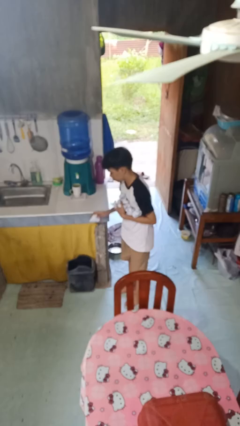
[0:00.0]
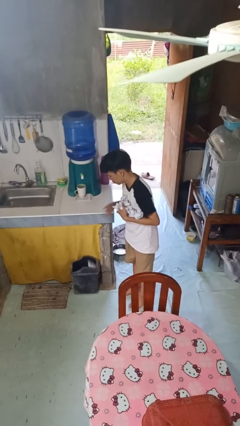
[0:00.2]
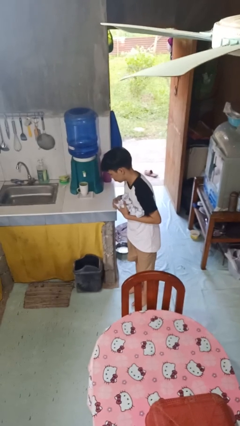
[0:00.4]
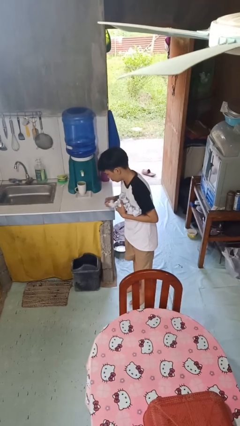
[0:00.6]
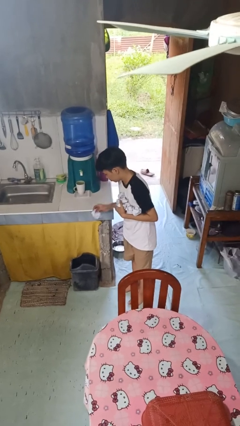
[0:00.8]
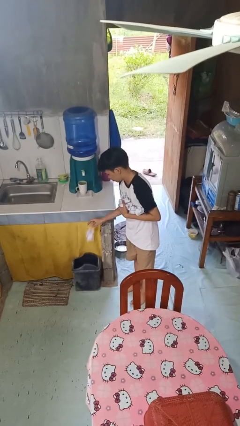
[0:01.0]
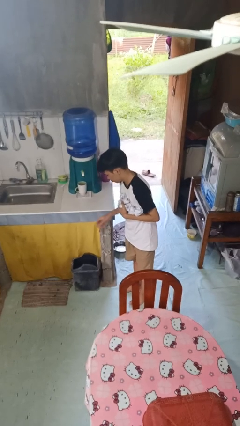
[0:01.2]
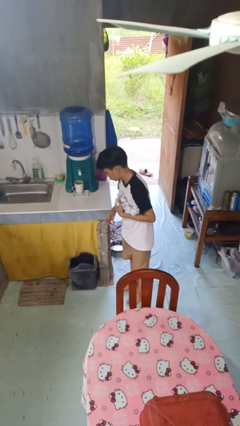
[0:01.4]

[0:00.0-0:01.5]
person discards trash

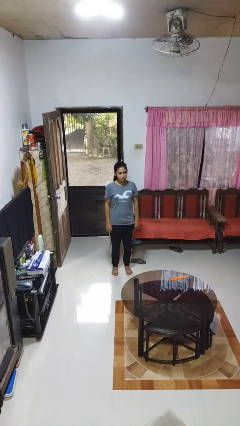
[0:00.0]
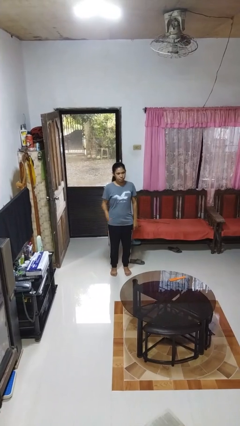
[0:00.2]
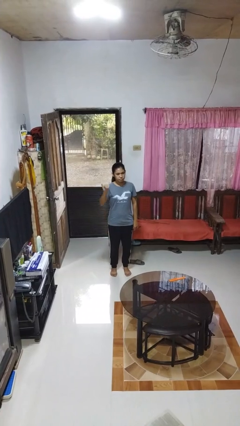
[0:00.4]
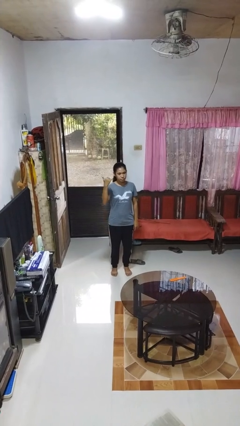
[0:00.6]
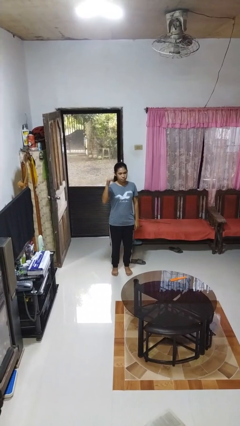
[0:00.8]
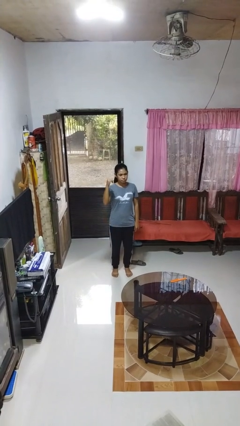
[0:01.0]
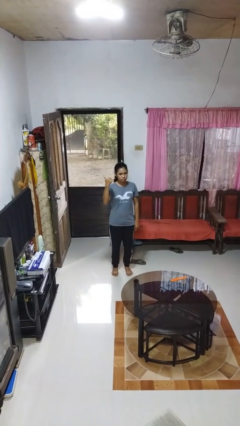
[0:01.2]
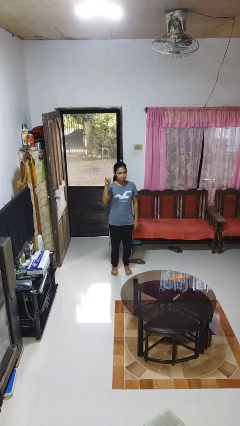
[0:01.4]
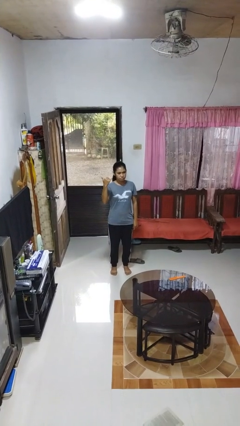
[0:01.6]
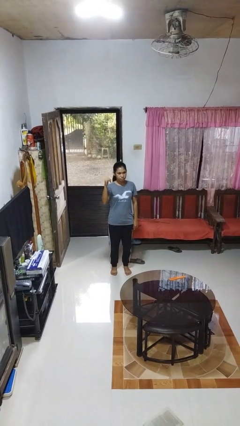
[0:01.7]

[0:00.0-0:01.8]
person gestures hang loose

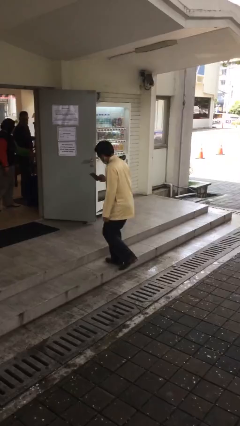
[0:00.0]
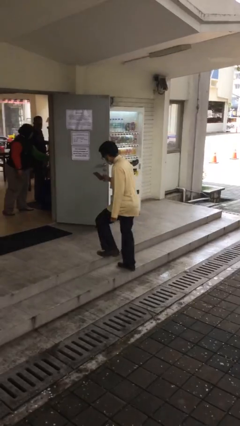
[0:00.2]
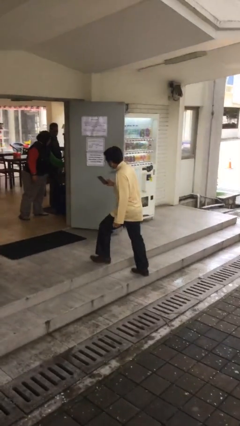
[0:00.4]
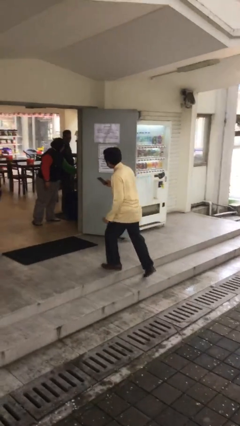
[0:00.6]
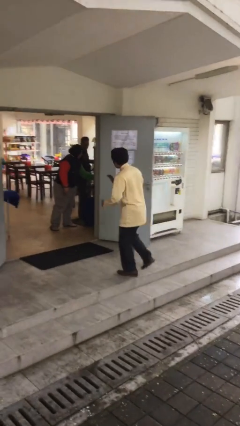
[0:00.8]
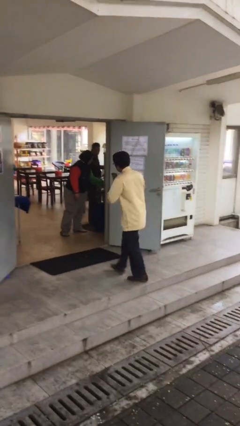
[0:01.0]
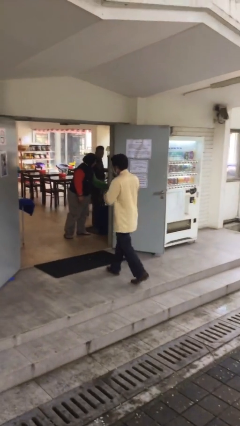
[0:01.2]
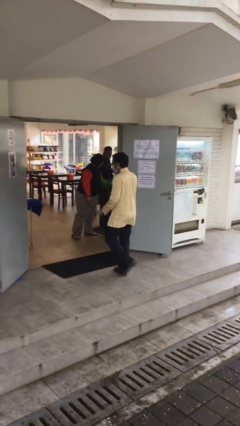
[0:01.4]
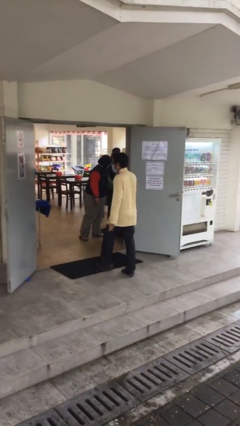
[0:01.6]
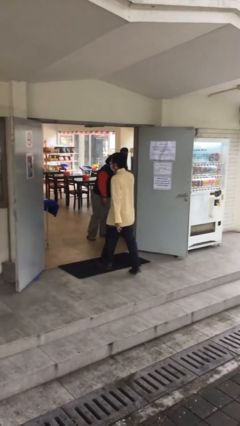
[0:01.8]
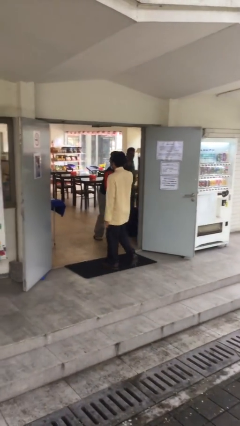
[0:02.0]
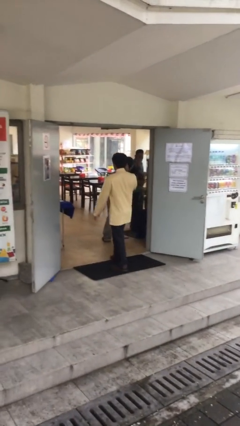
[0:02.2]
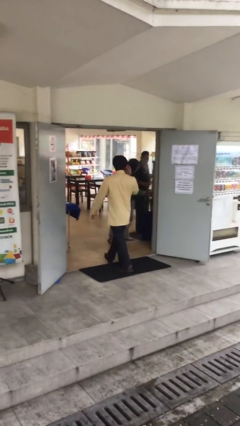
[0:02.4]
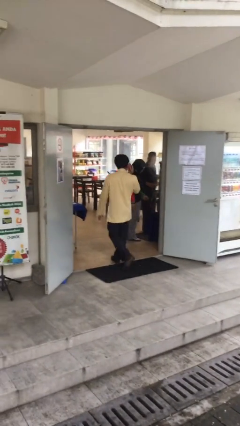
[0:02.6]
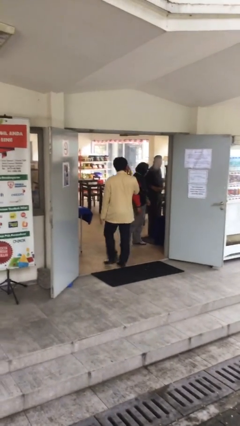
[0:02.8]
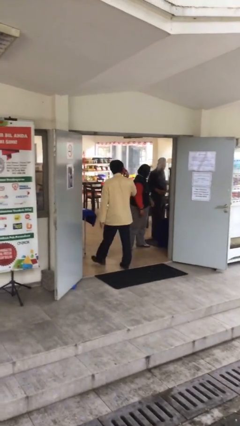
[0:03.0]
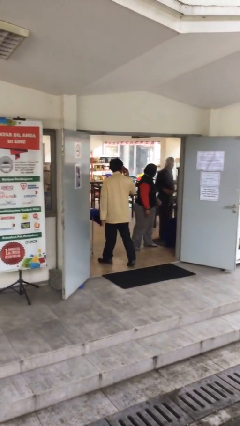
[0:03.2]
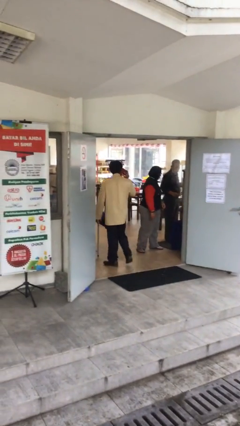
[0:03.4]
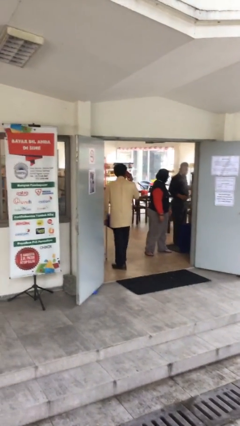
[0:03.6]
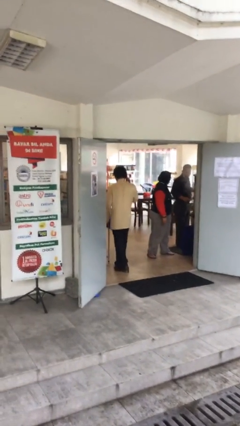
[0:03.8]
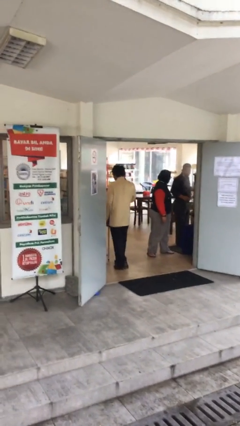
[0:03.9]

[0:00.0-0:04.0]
person exits scene through structure

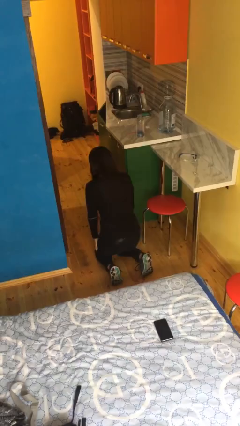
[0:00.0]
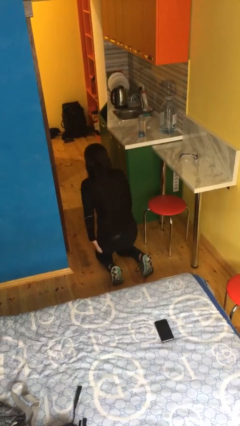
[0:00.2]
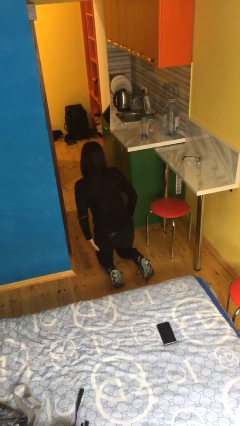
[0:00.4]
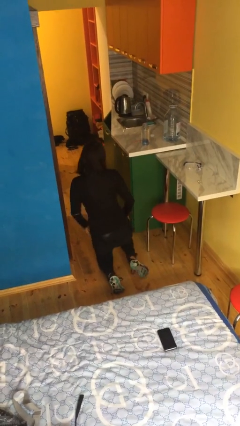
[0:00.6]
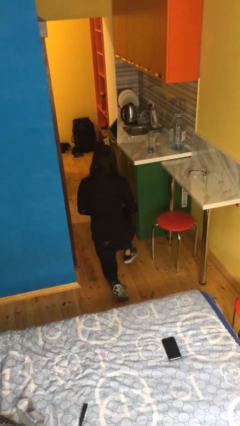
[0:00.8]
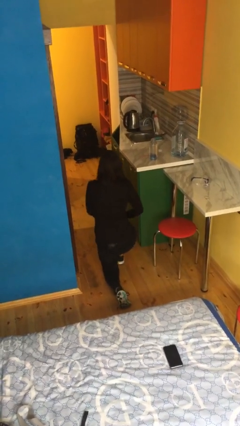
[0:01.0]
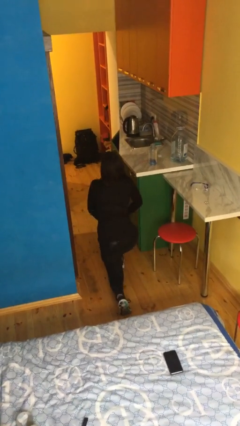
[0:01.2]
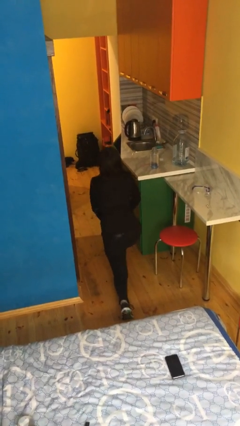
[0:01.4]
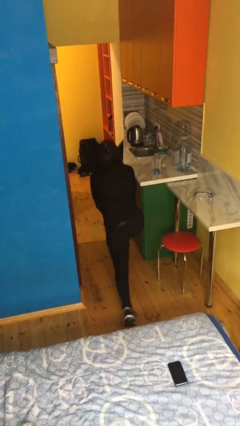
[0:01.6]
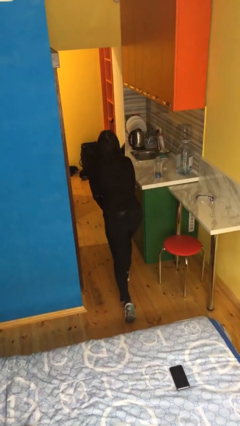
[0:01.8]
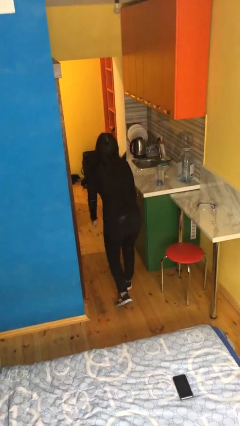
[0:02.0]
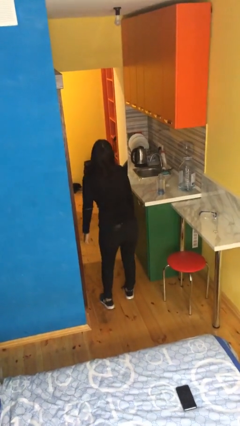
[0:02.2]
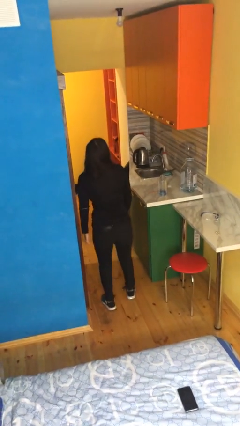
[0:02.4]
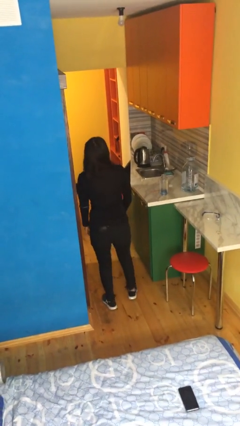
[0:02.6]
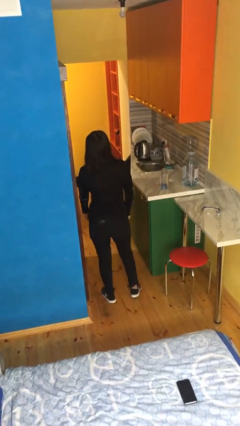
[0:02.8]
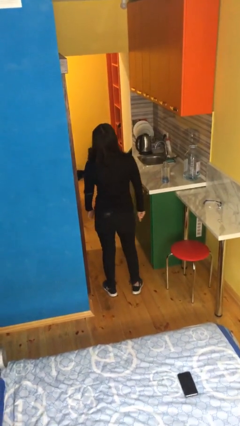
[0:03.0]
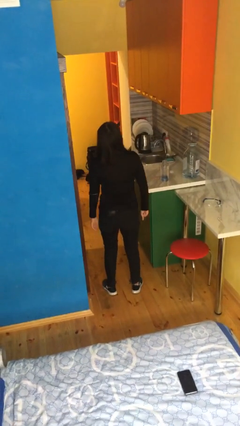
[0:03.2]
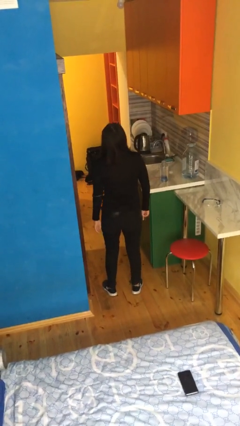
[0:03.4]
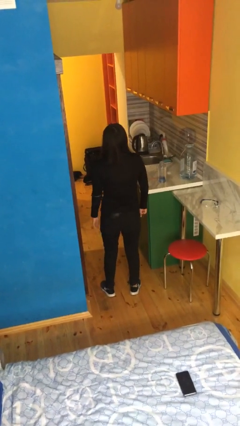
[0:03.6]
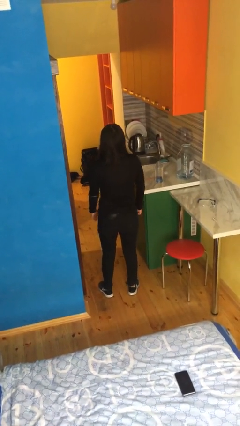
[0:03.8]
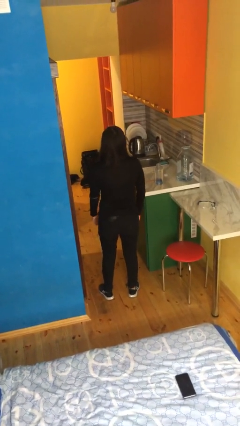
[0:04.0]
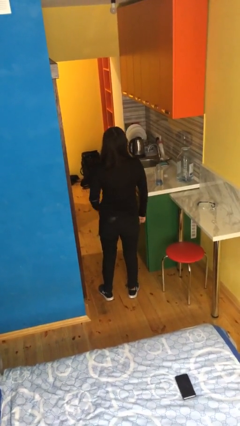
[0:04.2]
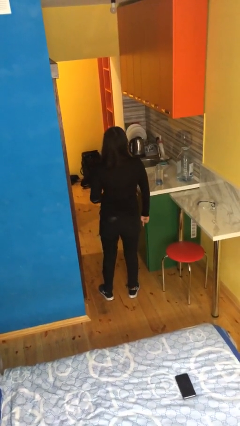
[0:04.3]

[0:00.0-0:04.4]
person stands up from floor

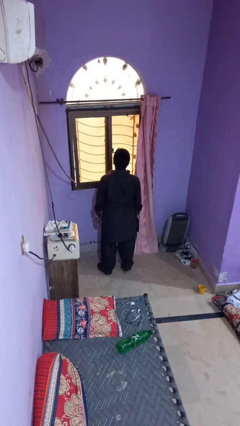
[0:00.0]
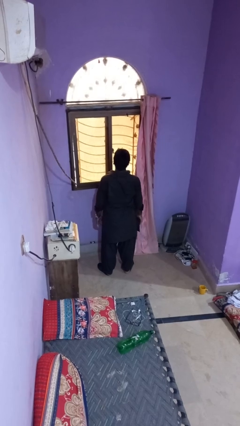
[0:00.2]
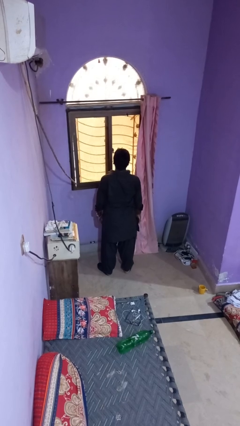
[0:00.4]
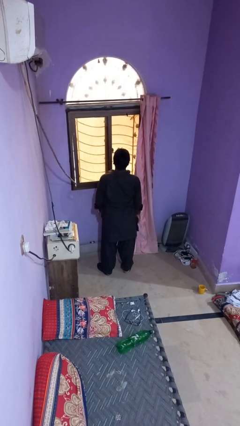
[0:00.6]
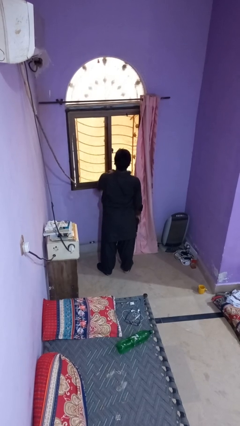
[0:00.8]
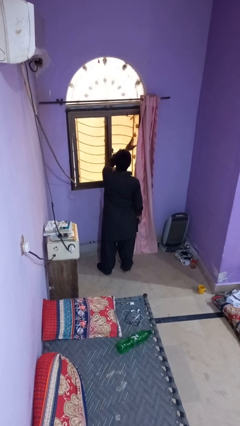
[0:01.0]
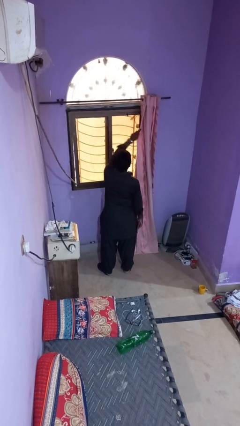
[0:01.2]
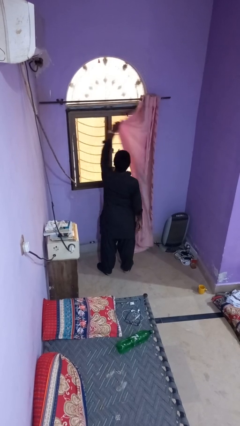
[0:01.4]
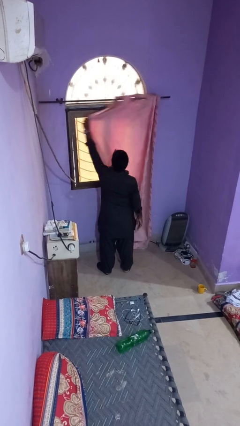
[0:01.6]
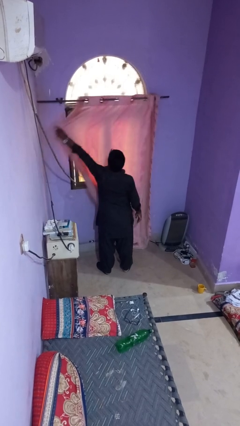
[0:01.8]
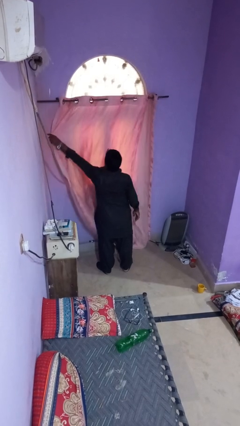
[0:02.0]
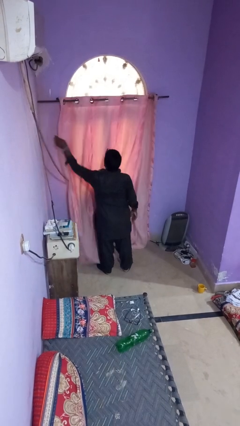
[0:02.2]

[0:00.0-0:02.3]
person closes curtains

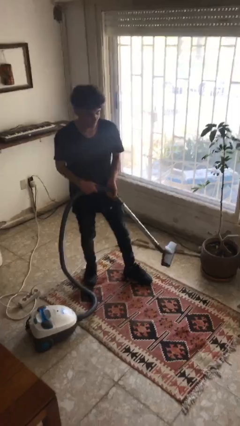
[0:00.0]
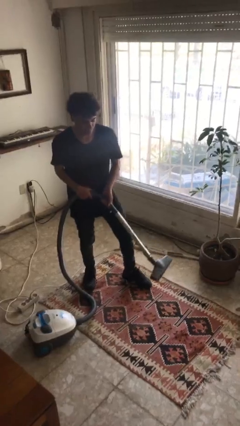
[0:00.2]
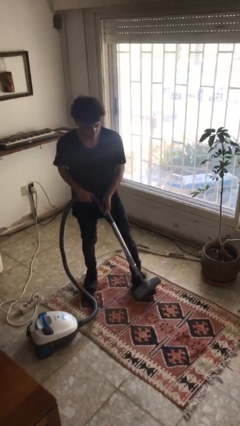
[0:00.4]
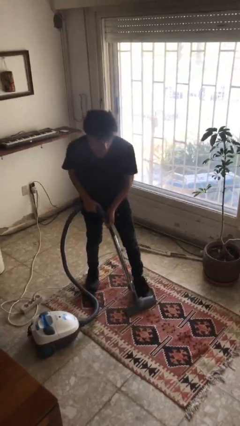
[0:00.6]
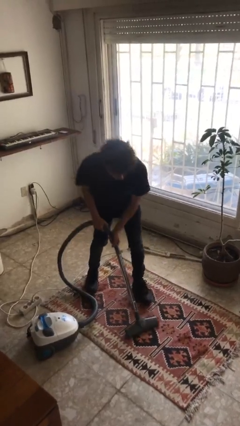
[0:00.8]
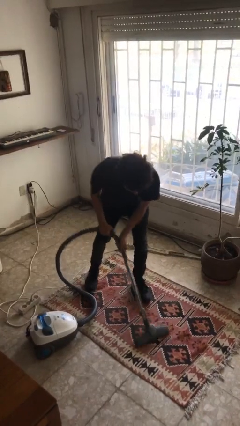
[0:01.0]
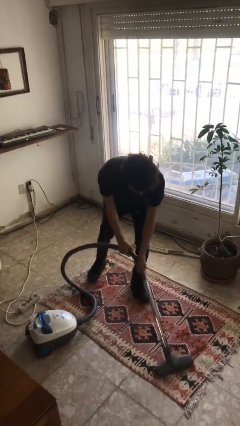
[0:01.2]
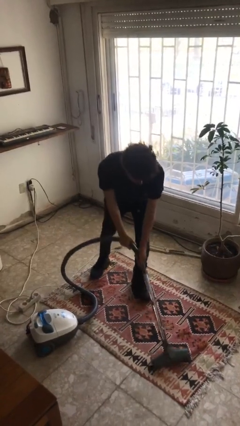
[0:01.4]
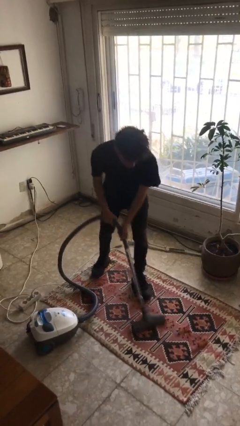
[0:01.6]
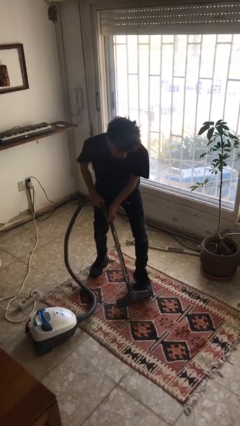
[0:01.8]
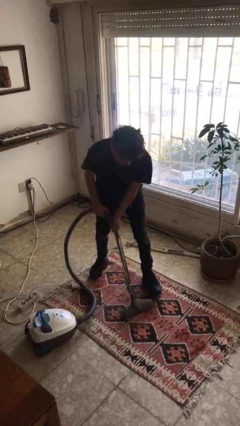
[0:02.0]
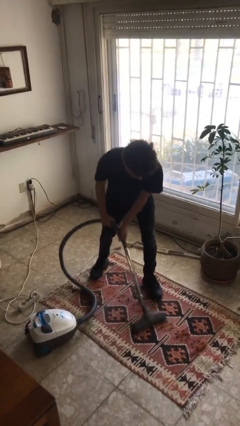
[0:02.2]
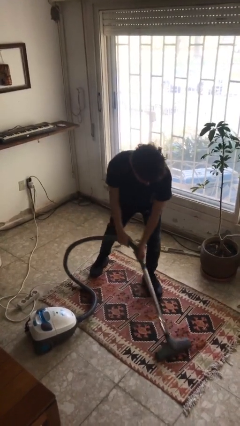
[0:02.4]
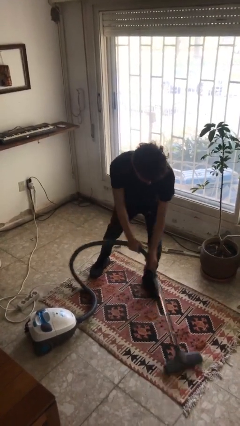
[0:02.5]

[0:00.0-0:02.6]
person vacuums carpet

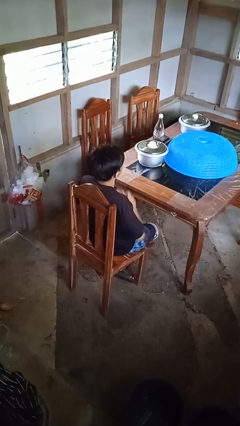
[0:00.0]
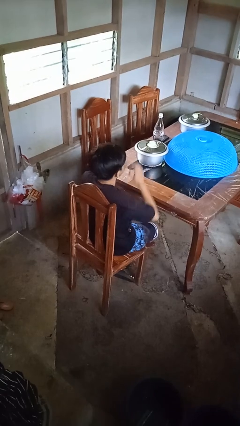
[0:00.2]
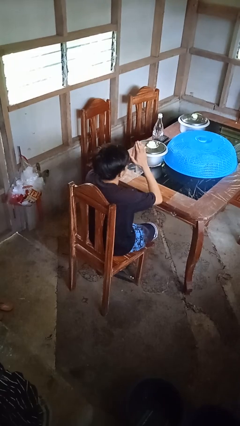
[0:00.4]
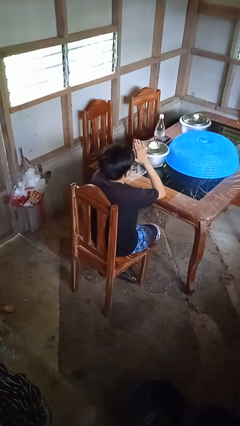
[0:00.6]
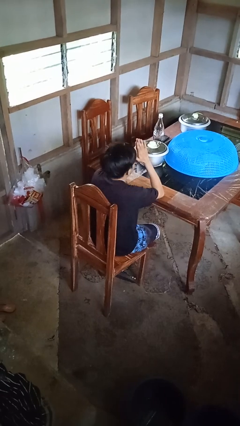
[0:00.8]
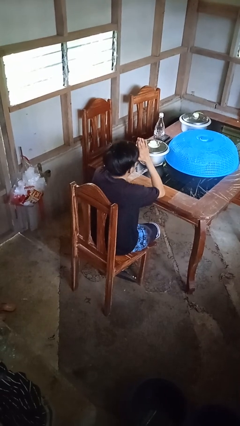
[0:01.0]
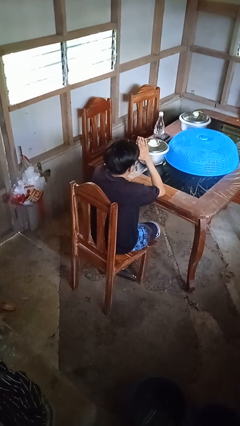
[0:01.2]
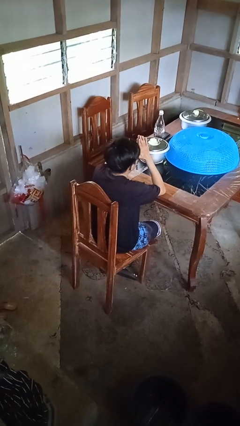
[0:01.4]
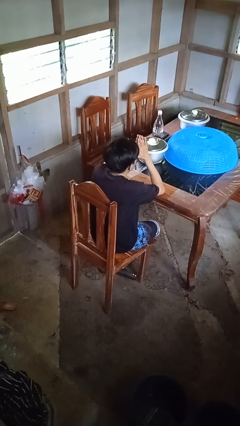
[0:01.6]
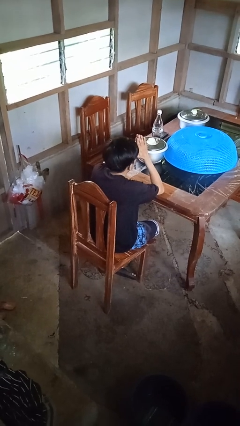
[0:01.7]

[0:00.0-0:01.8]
person prays
